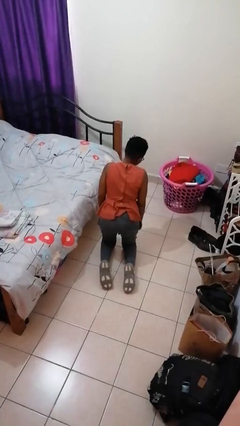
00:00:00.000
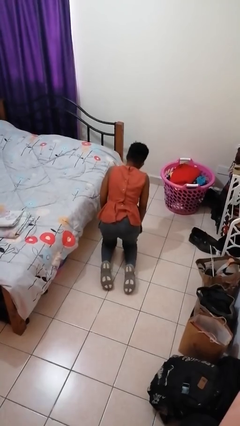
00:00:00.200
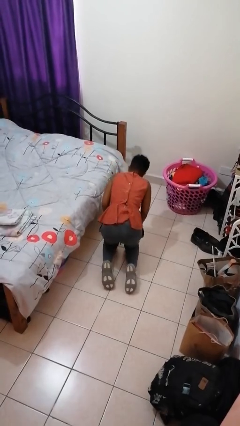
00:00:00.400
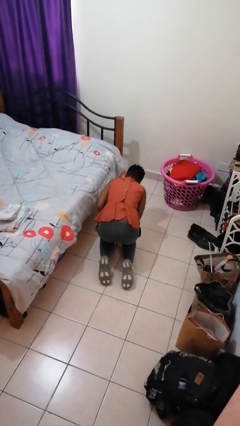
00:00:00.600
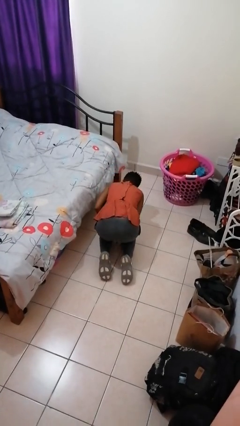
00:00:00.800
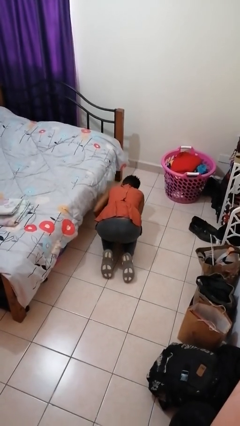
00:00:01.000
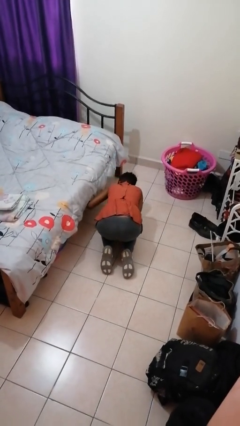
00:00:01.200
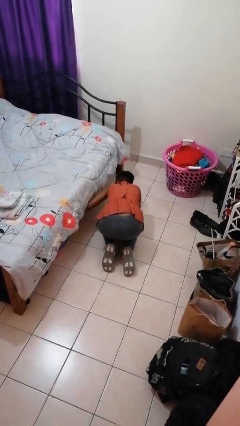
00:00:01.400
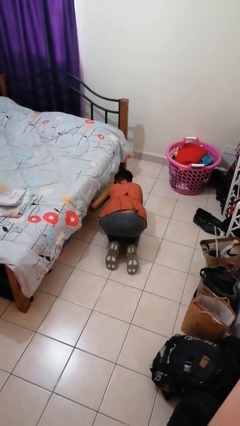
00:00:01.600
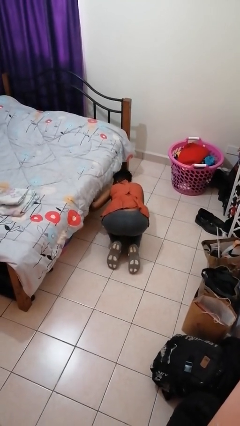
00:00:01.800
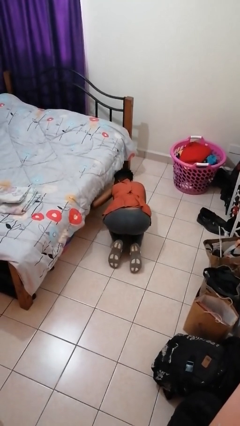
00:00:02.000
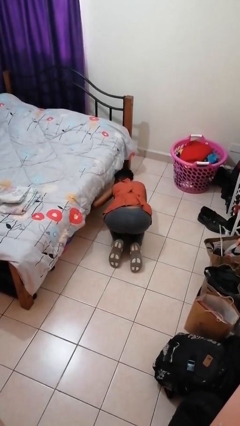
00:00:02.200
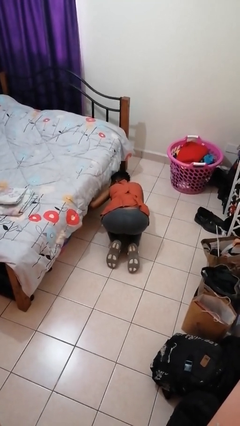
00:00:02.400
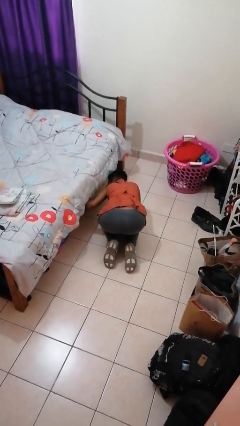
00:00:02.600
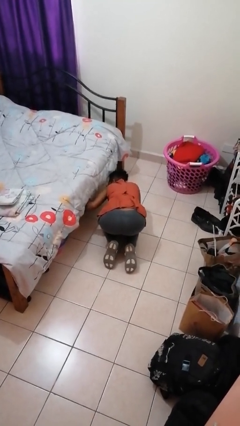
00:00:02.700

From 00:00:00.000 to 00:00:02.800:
person searches under bed

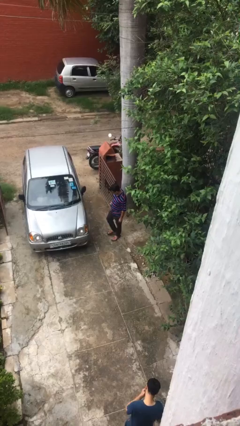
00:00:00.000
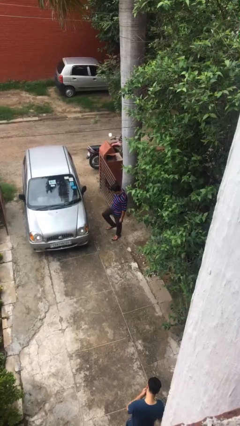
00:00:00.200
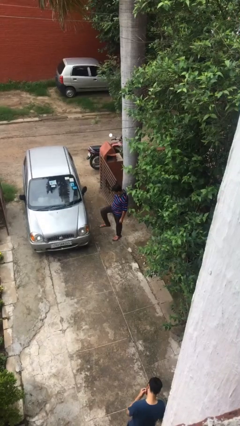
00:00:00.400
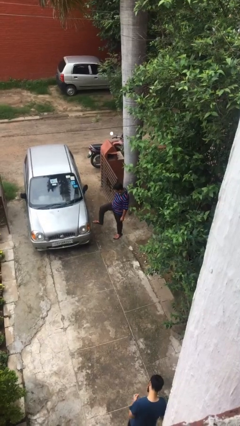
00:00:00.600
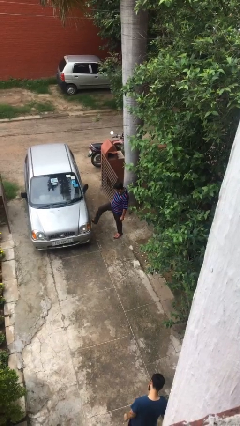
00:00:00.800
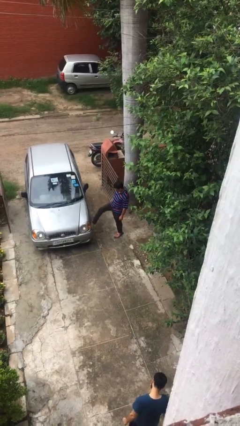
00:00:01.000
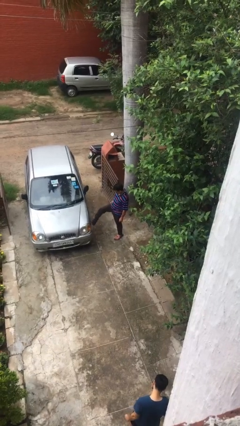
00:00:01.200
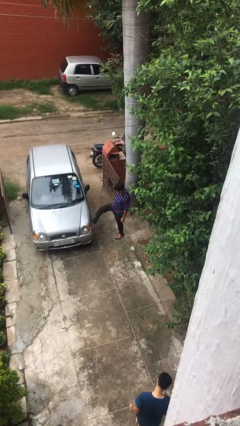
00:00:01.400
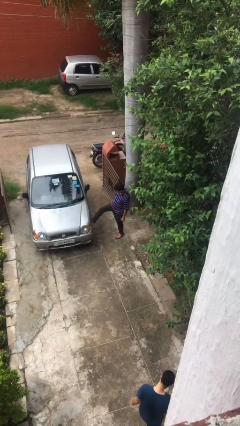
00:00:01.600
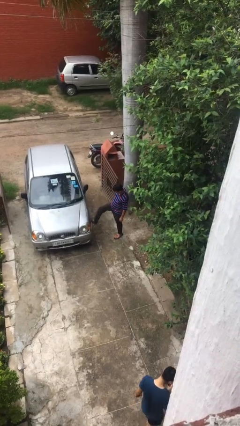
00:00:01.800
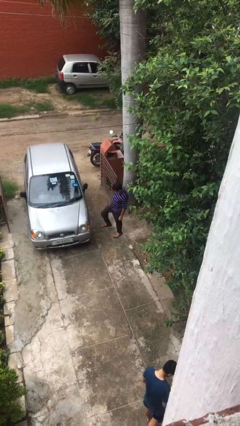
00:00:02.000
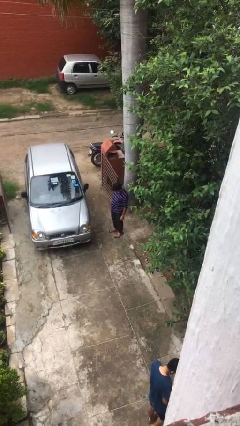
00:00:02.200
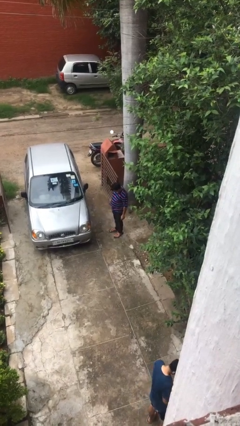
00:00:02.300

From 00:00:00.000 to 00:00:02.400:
person kicks car tires

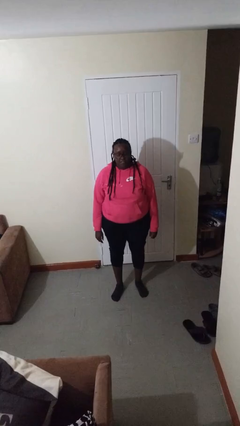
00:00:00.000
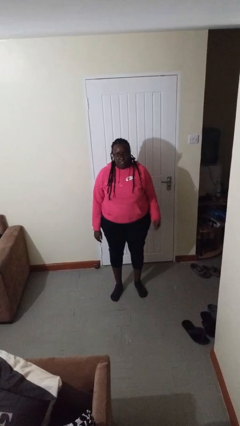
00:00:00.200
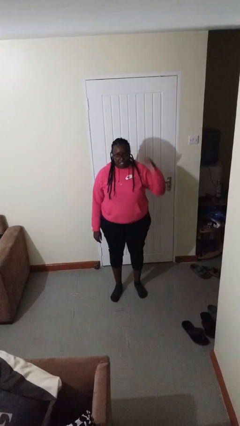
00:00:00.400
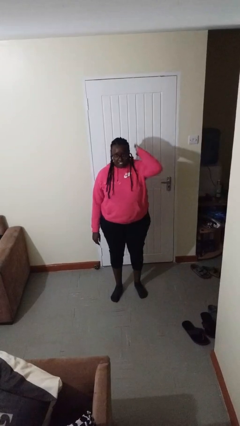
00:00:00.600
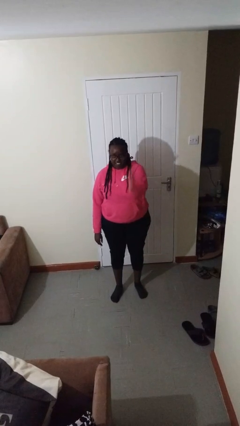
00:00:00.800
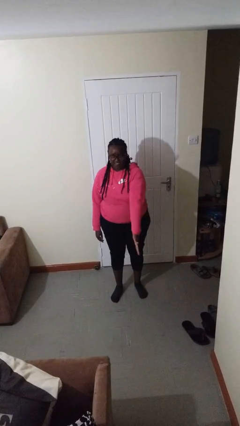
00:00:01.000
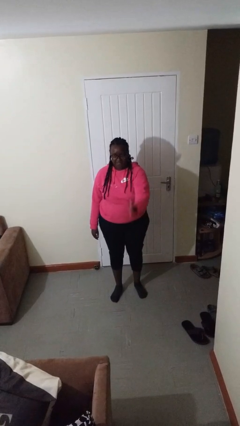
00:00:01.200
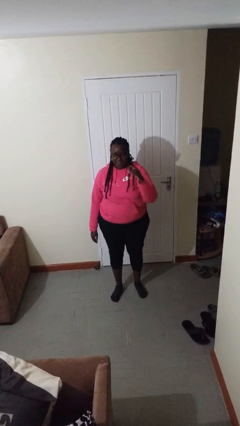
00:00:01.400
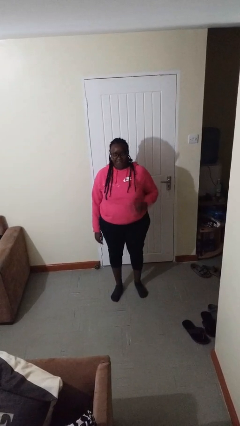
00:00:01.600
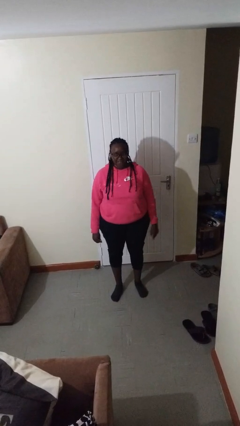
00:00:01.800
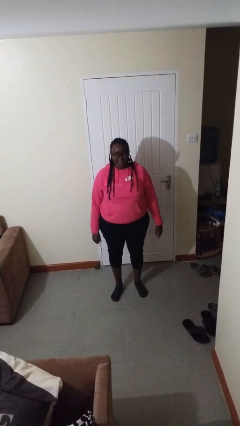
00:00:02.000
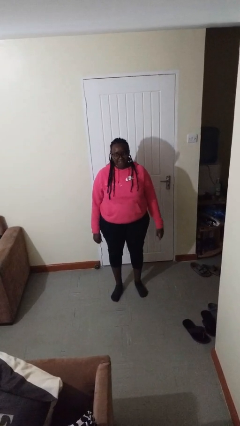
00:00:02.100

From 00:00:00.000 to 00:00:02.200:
person karate chop

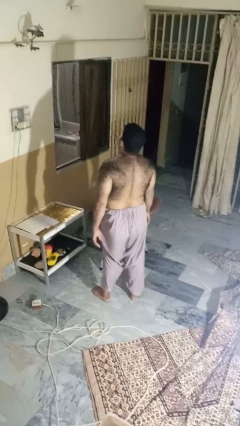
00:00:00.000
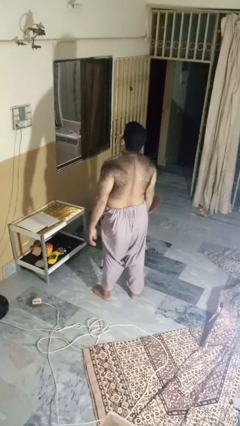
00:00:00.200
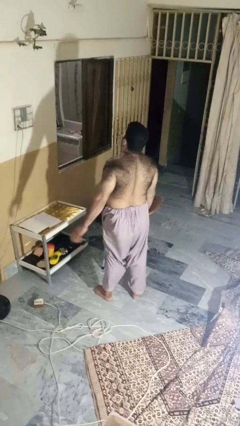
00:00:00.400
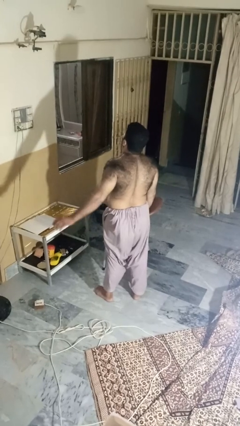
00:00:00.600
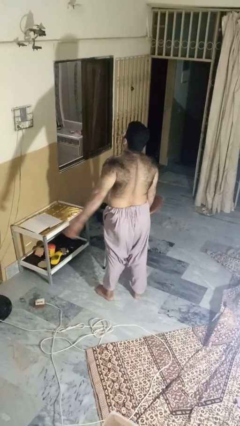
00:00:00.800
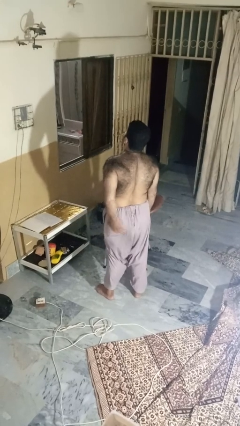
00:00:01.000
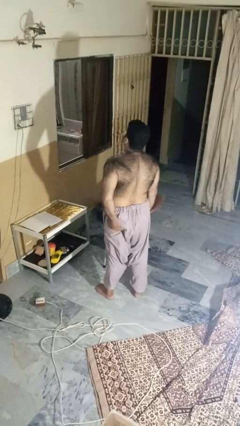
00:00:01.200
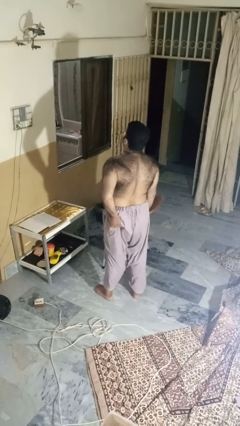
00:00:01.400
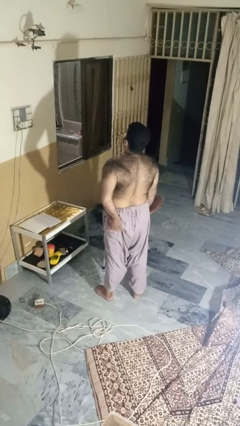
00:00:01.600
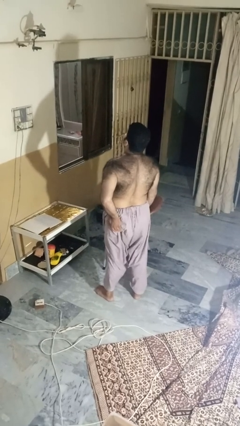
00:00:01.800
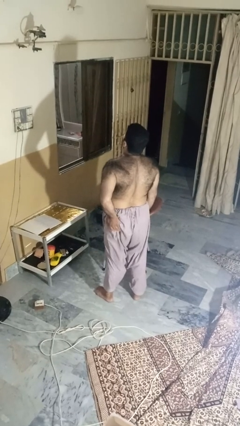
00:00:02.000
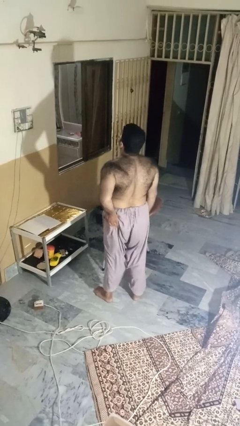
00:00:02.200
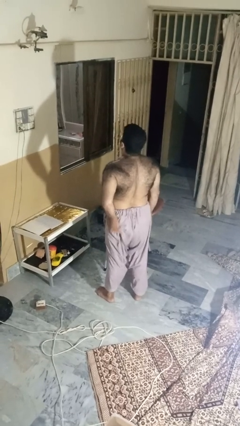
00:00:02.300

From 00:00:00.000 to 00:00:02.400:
person wiggles hips

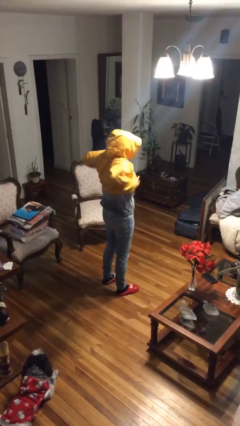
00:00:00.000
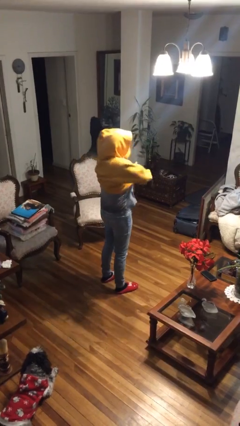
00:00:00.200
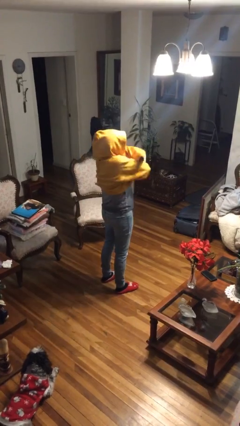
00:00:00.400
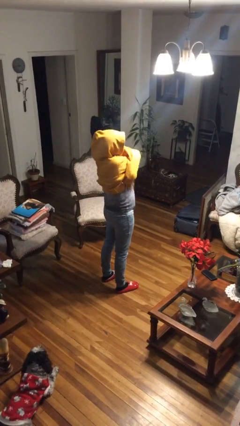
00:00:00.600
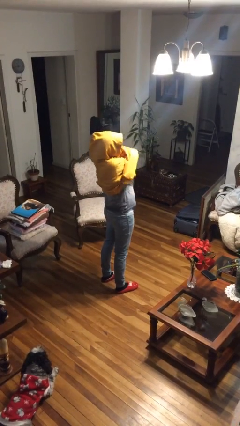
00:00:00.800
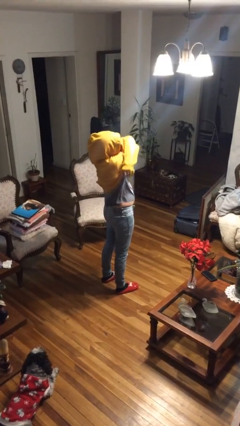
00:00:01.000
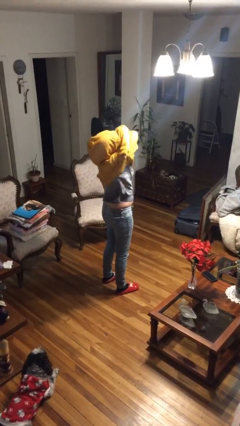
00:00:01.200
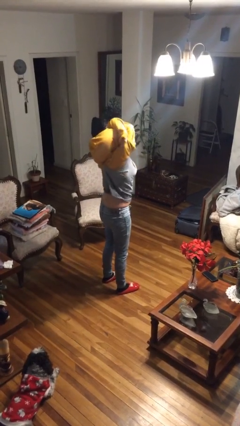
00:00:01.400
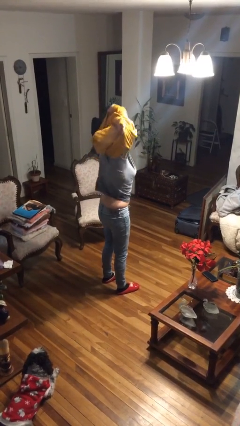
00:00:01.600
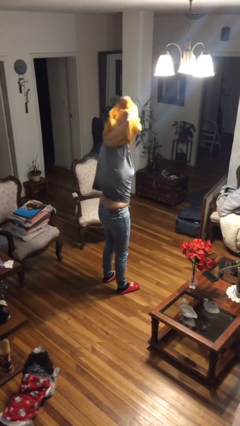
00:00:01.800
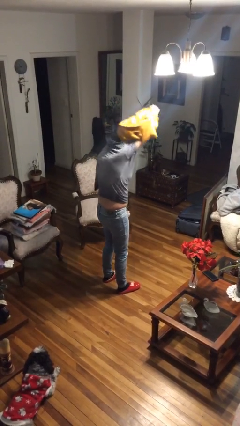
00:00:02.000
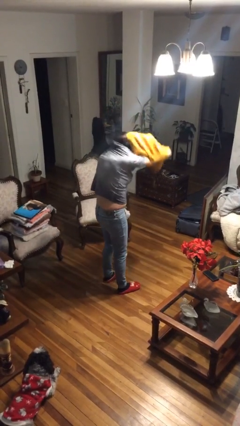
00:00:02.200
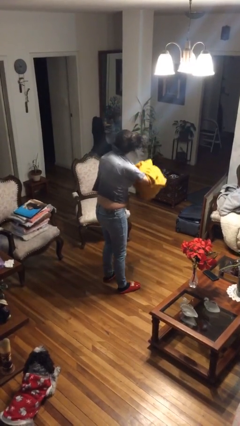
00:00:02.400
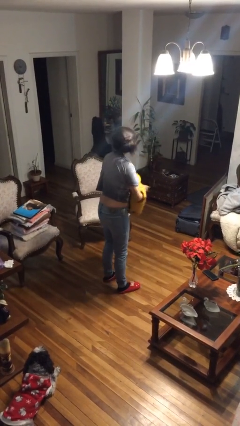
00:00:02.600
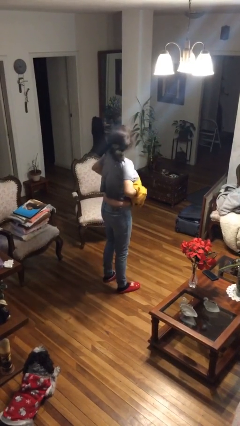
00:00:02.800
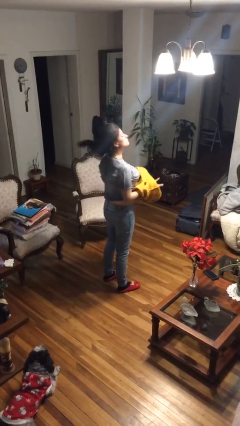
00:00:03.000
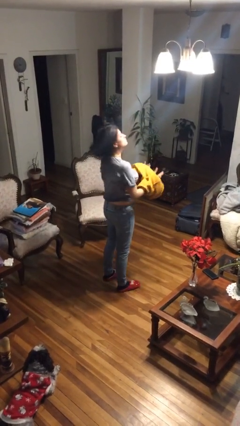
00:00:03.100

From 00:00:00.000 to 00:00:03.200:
person takes off hoodie

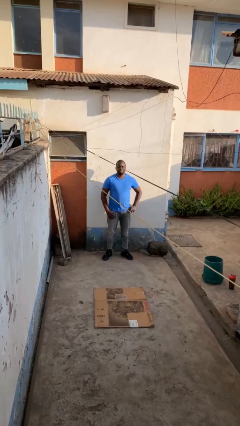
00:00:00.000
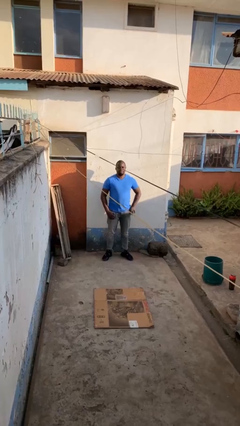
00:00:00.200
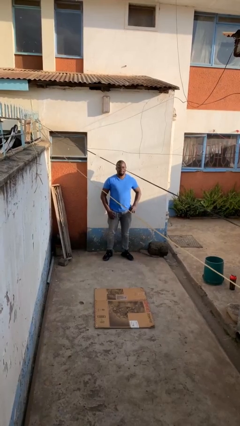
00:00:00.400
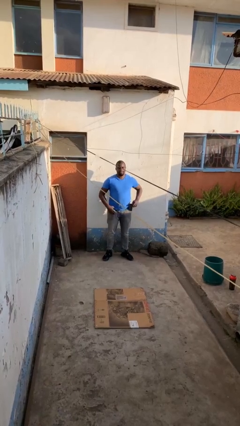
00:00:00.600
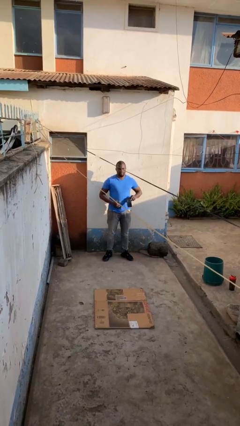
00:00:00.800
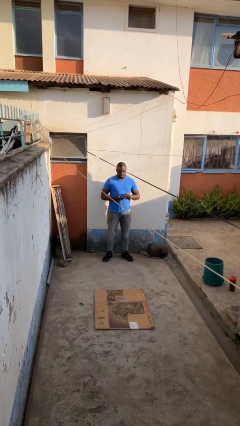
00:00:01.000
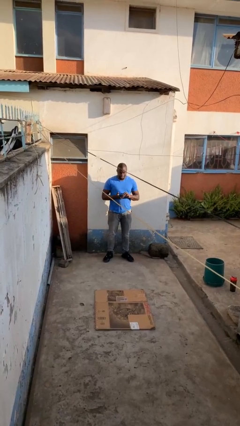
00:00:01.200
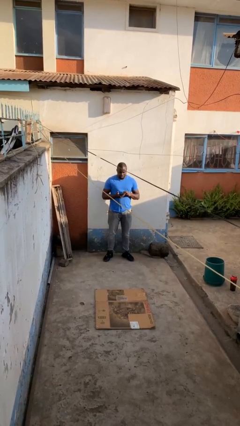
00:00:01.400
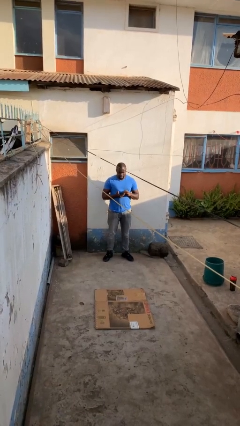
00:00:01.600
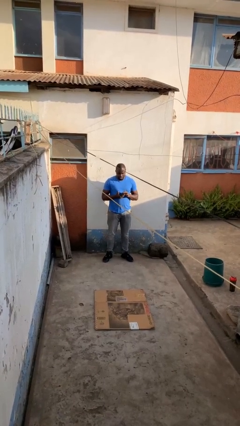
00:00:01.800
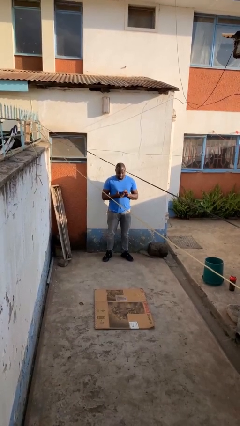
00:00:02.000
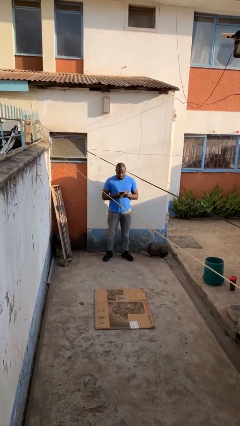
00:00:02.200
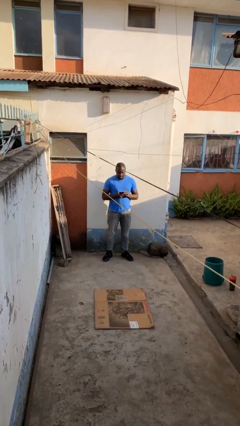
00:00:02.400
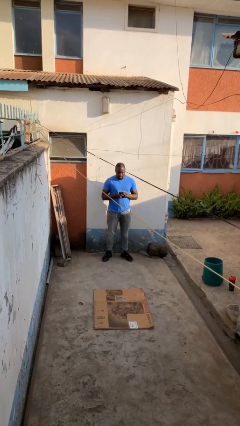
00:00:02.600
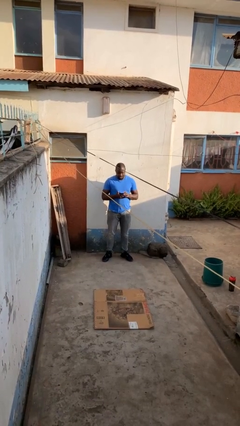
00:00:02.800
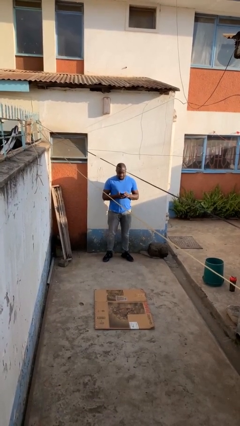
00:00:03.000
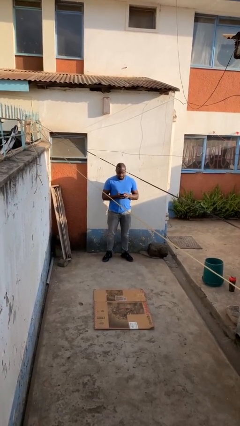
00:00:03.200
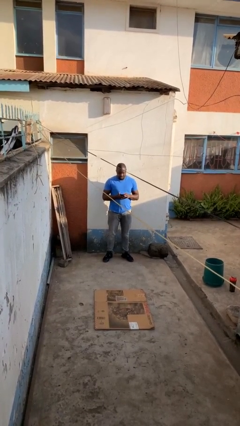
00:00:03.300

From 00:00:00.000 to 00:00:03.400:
person takes phone from pocket

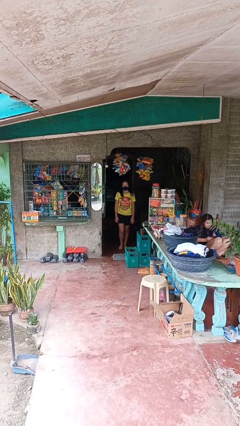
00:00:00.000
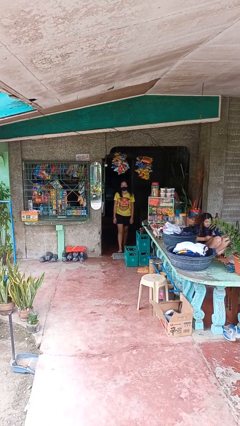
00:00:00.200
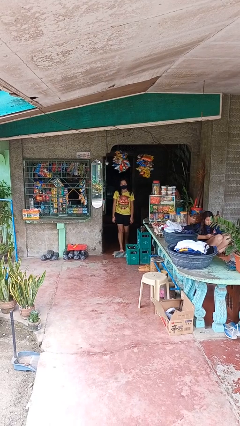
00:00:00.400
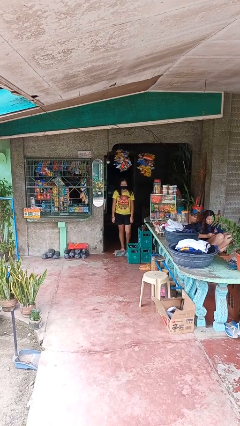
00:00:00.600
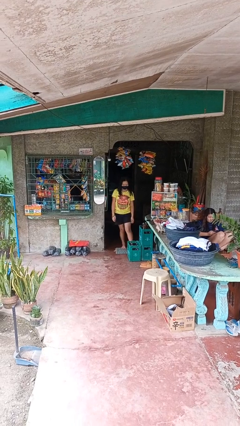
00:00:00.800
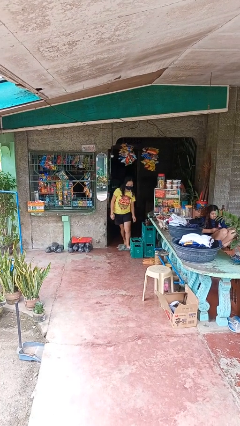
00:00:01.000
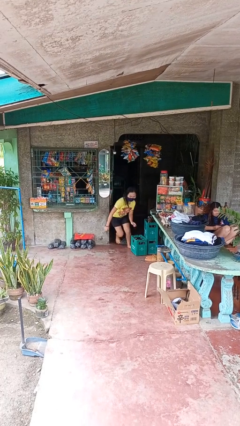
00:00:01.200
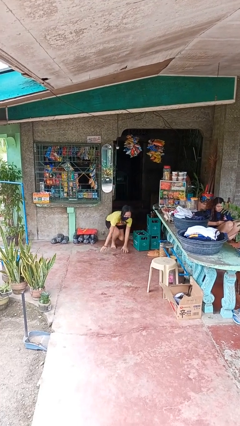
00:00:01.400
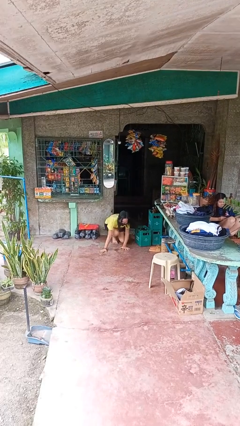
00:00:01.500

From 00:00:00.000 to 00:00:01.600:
person trips on object on floor
